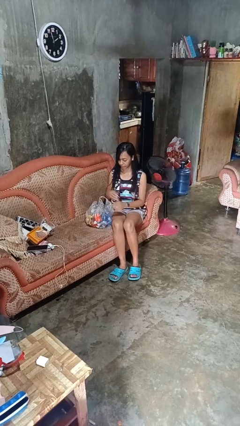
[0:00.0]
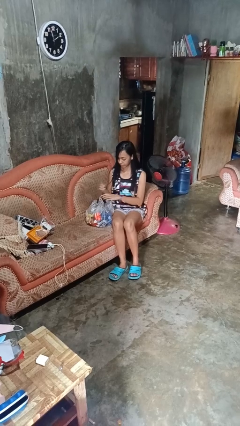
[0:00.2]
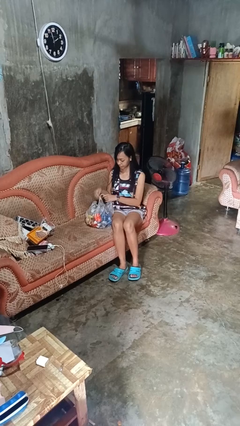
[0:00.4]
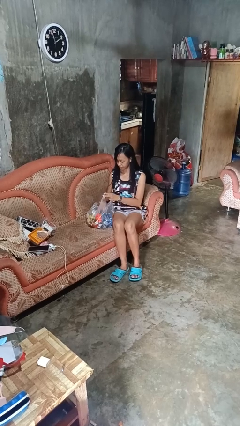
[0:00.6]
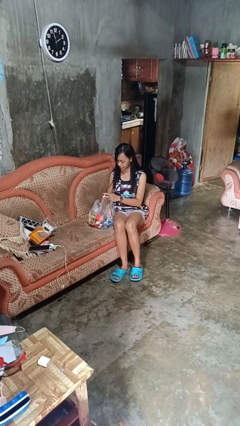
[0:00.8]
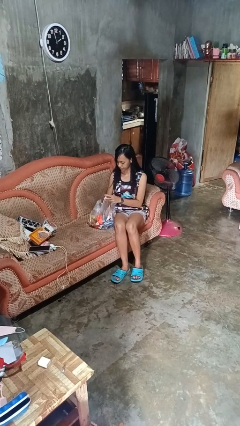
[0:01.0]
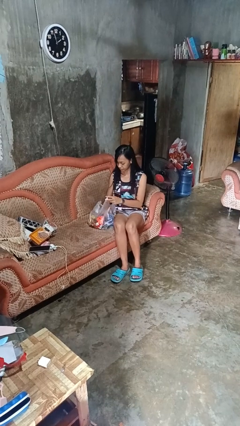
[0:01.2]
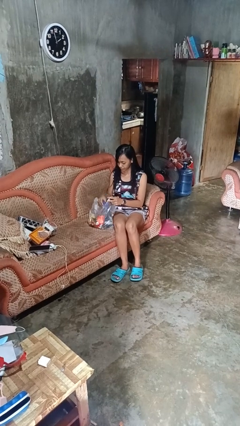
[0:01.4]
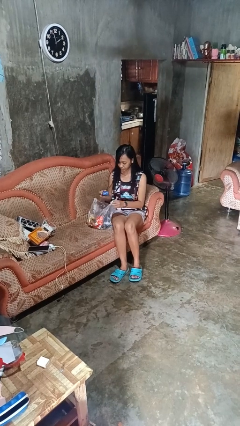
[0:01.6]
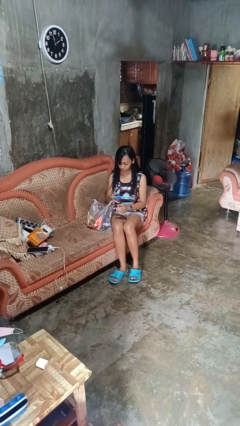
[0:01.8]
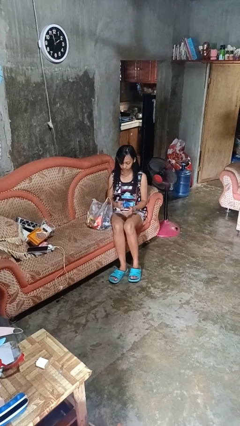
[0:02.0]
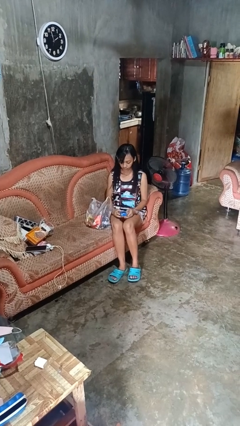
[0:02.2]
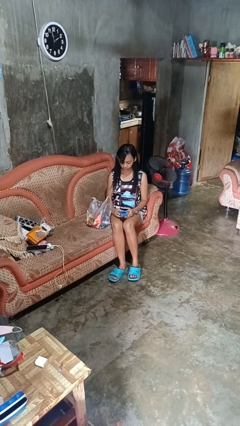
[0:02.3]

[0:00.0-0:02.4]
person takes object from bag

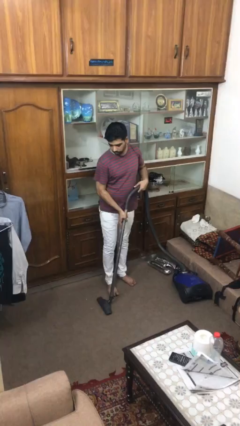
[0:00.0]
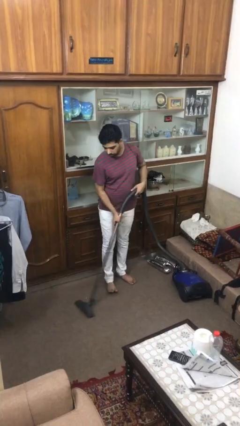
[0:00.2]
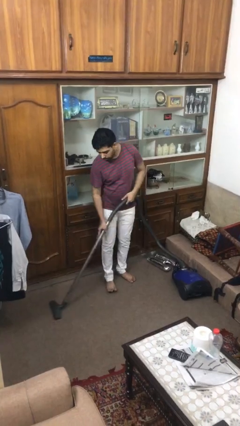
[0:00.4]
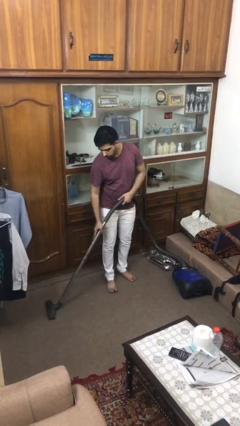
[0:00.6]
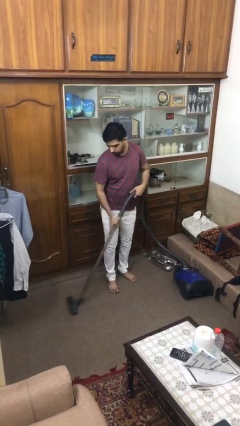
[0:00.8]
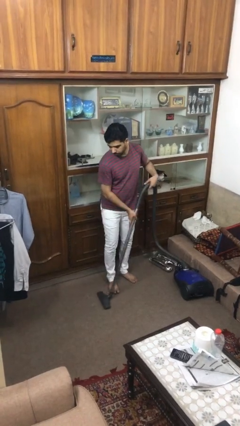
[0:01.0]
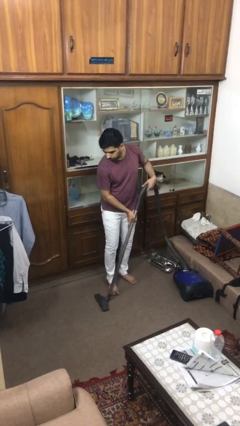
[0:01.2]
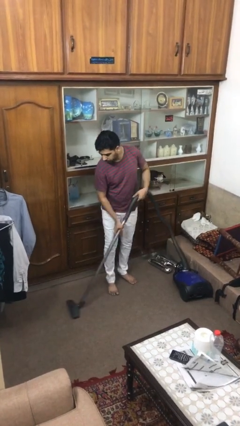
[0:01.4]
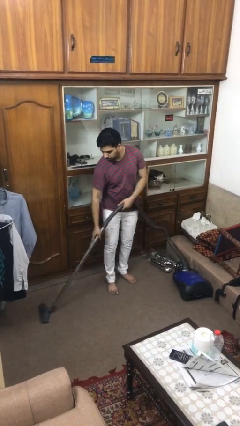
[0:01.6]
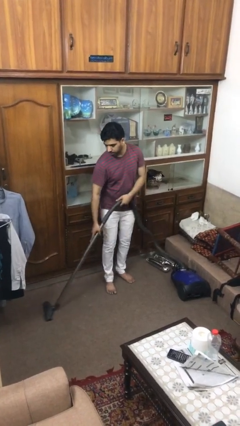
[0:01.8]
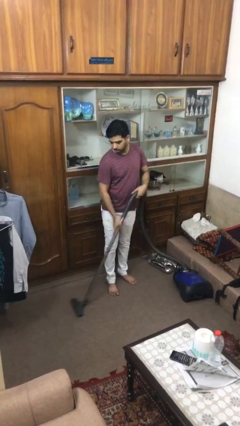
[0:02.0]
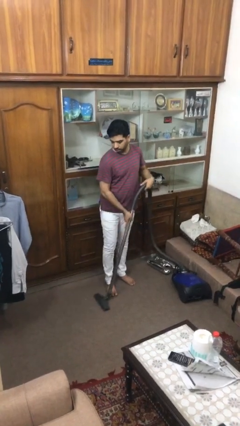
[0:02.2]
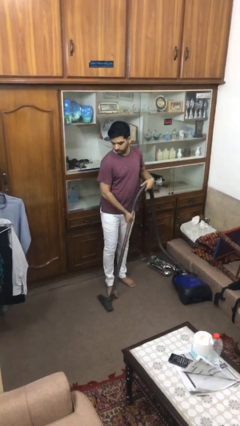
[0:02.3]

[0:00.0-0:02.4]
person vacuums carpet

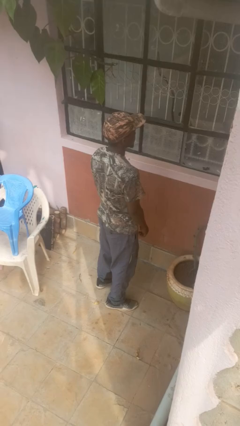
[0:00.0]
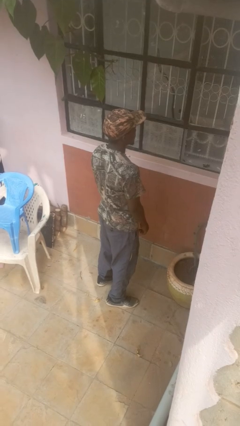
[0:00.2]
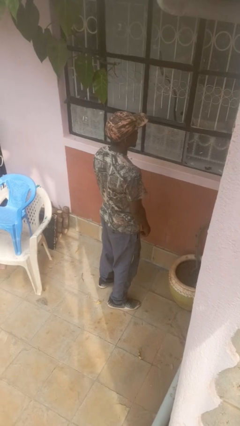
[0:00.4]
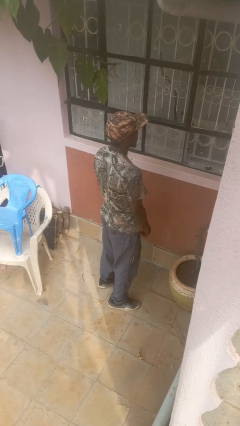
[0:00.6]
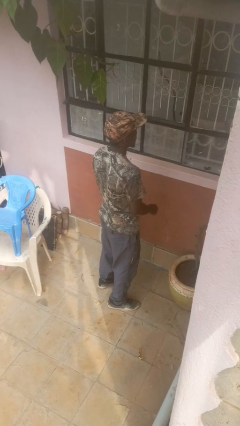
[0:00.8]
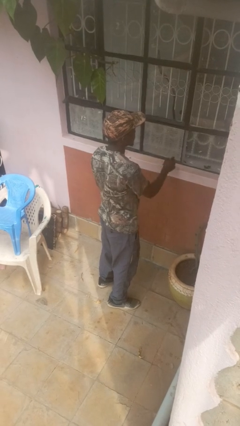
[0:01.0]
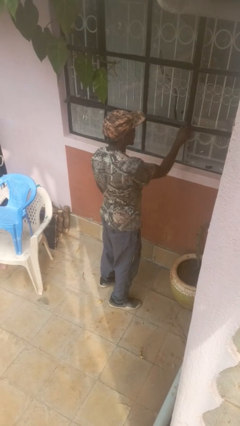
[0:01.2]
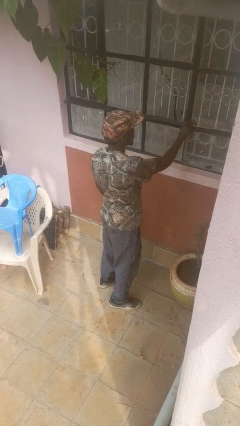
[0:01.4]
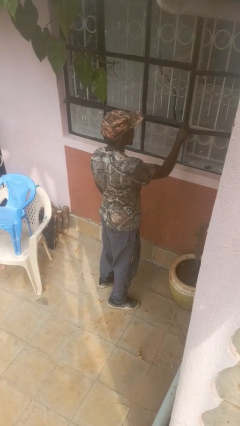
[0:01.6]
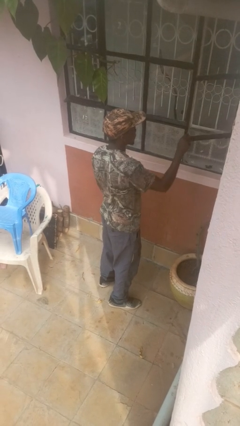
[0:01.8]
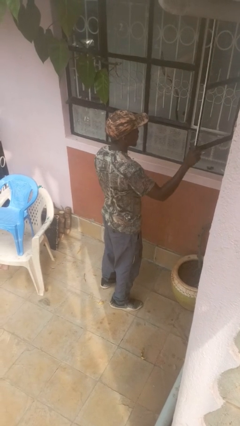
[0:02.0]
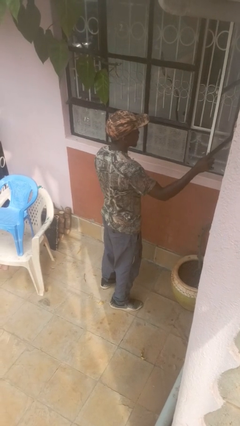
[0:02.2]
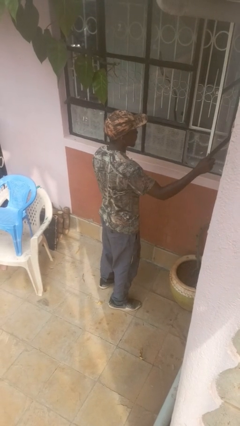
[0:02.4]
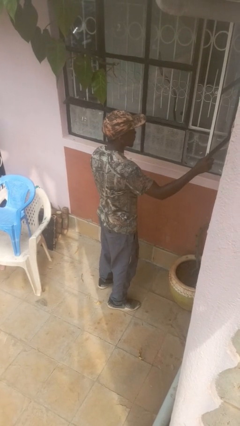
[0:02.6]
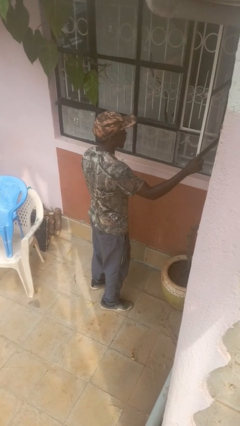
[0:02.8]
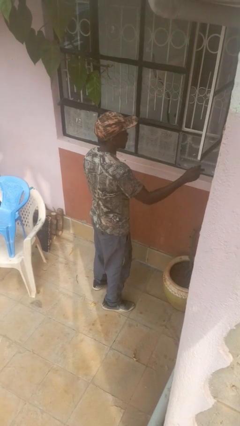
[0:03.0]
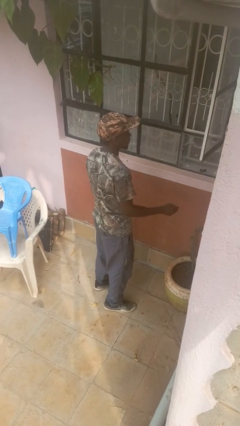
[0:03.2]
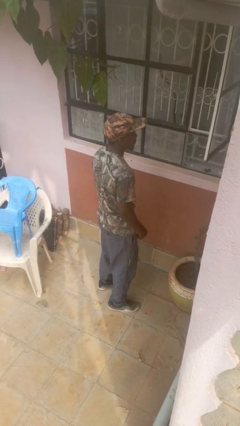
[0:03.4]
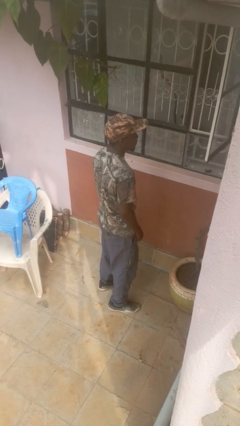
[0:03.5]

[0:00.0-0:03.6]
person opens home window

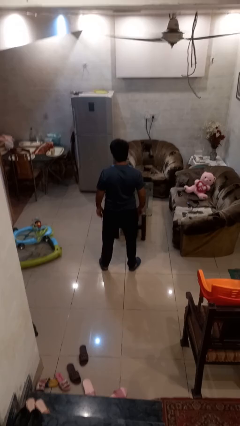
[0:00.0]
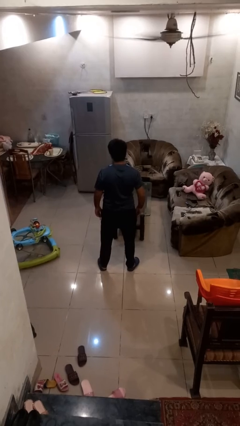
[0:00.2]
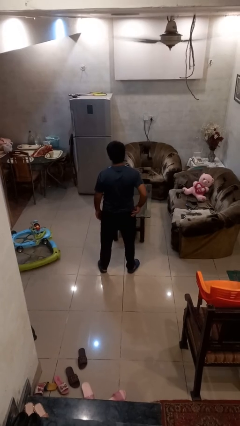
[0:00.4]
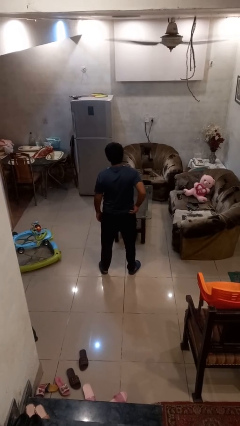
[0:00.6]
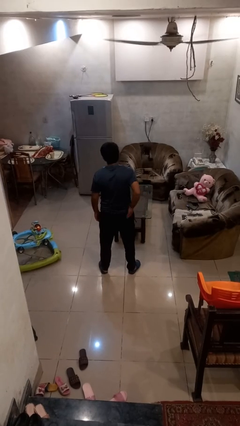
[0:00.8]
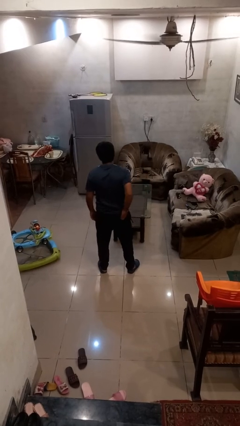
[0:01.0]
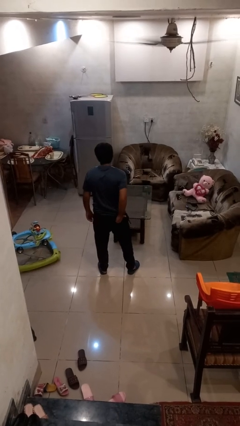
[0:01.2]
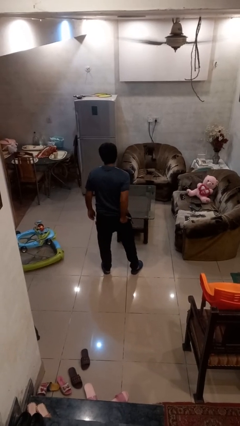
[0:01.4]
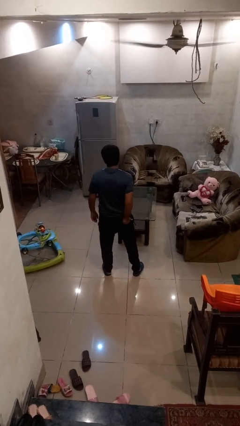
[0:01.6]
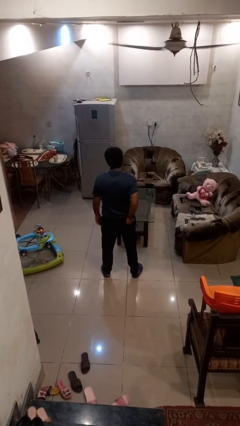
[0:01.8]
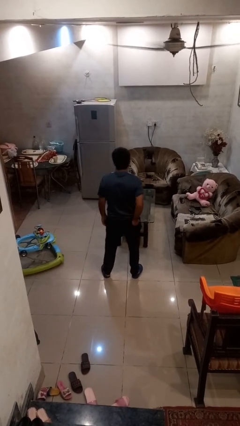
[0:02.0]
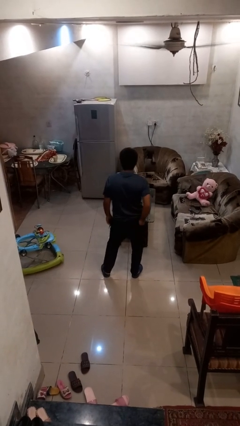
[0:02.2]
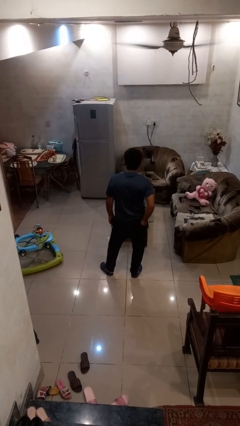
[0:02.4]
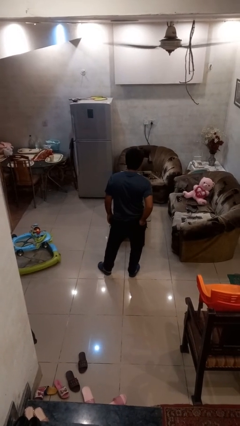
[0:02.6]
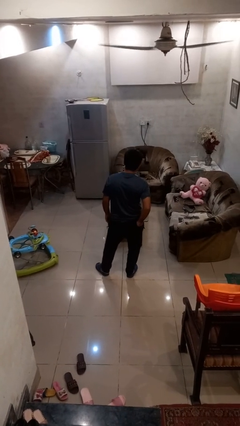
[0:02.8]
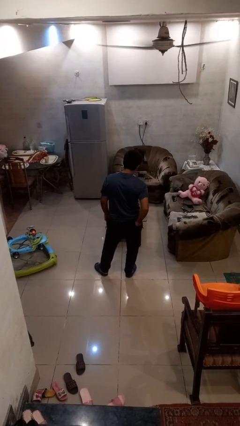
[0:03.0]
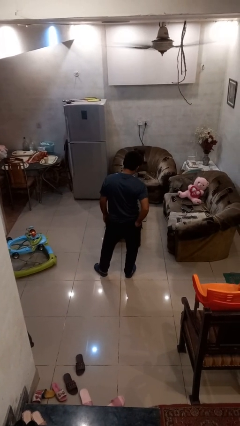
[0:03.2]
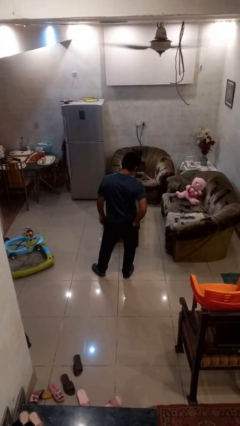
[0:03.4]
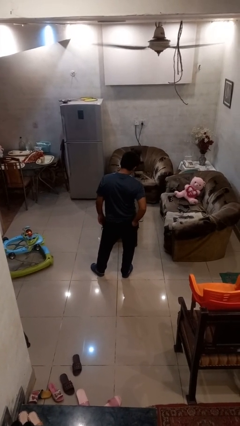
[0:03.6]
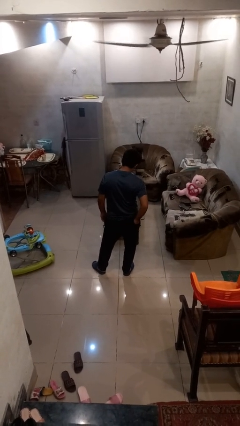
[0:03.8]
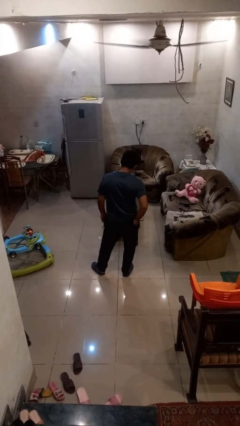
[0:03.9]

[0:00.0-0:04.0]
person puts hands in back pockets

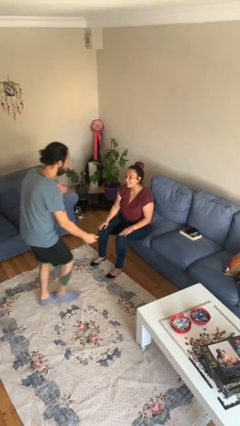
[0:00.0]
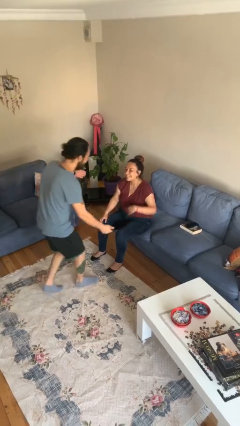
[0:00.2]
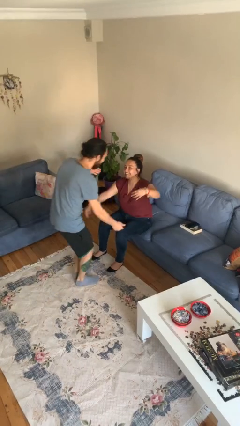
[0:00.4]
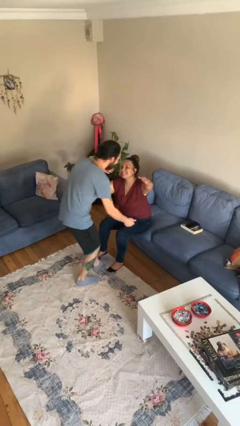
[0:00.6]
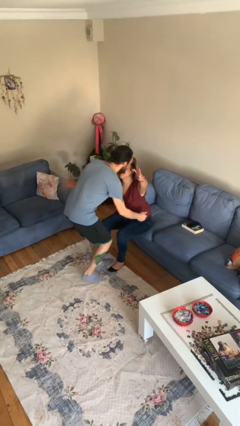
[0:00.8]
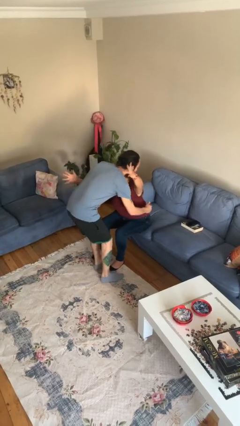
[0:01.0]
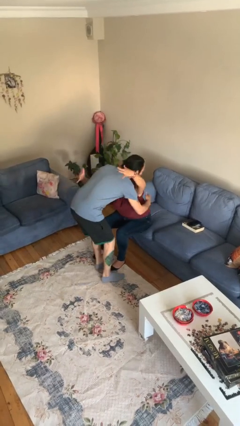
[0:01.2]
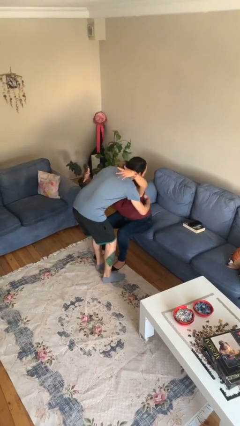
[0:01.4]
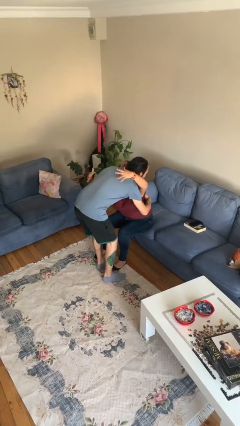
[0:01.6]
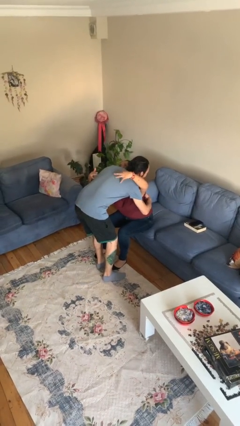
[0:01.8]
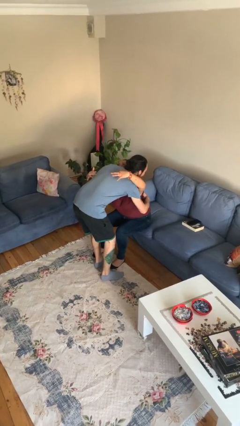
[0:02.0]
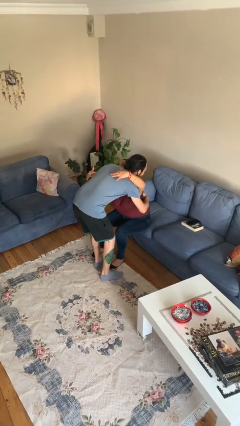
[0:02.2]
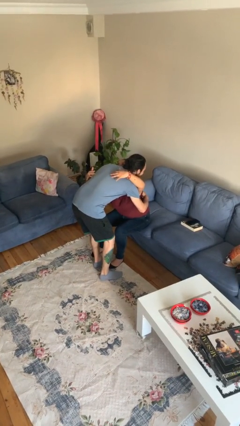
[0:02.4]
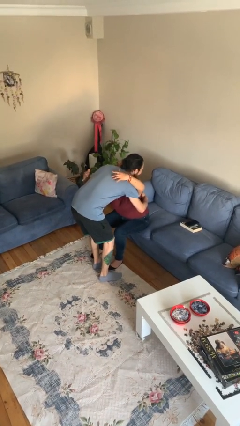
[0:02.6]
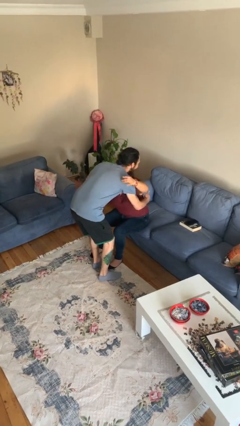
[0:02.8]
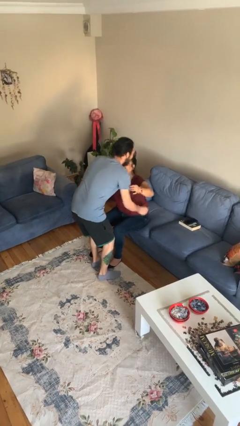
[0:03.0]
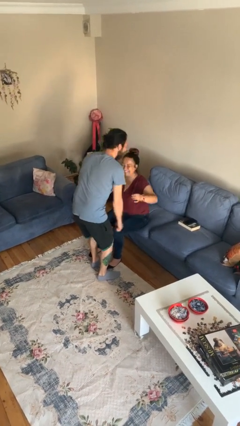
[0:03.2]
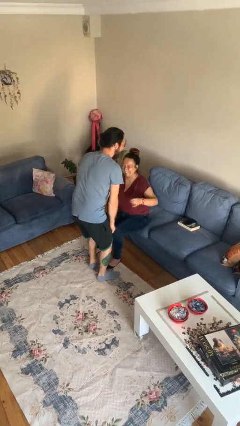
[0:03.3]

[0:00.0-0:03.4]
person embraces person

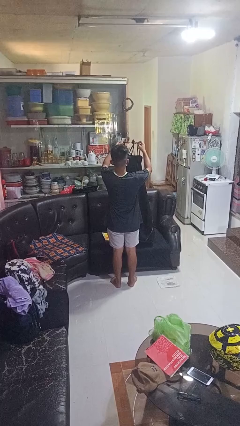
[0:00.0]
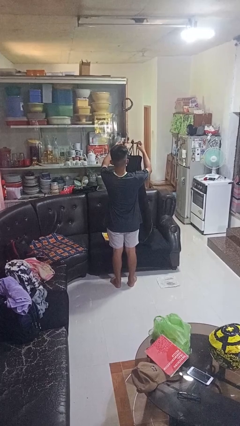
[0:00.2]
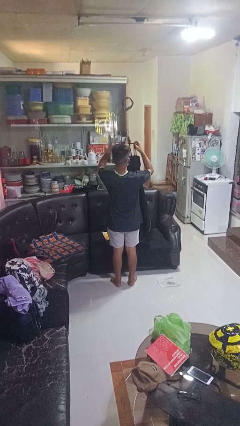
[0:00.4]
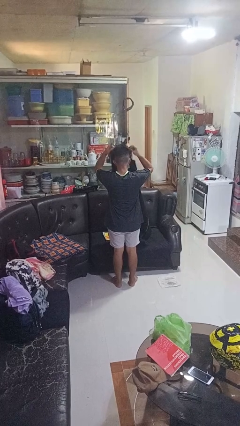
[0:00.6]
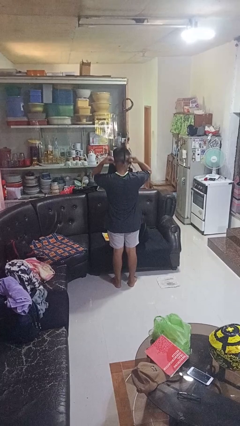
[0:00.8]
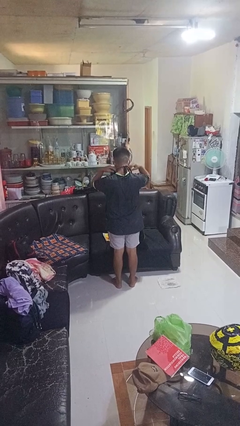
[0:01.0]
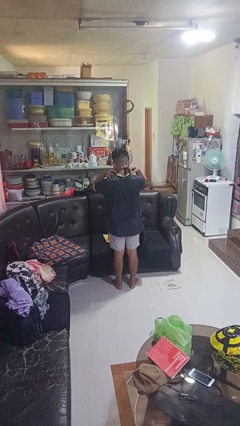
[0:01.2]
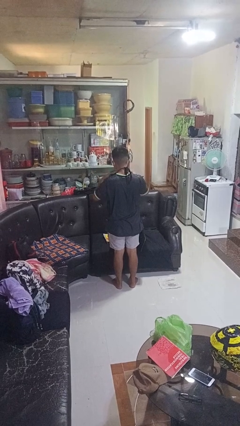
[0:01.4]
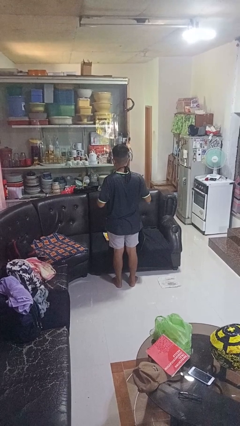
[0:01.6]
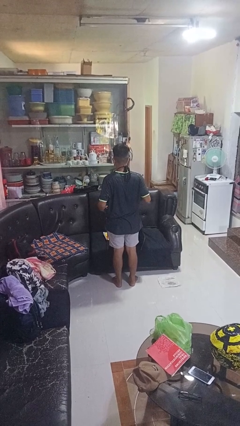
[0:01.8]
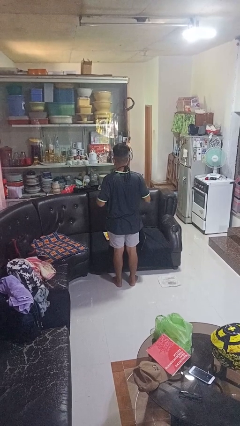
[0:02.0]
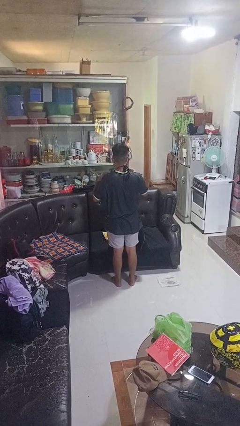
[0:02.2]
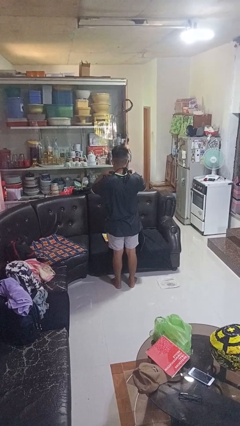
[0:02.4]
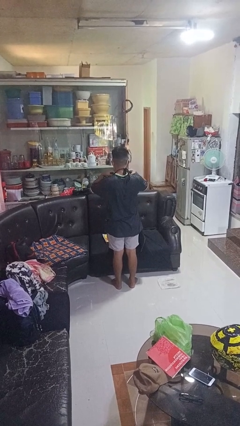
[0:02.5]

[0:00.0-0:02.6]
person puts on apron
